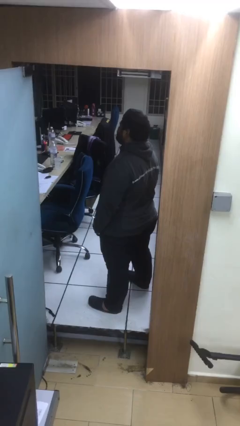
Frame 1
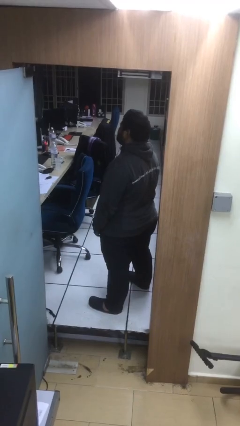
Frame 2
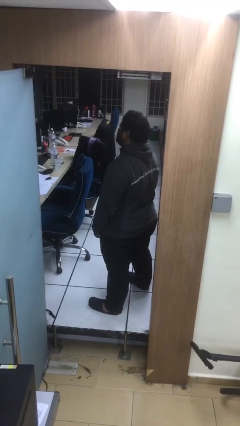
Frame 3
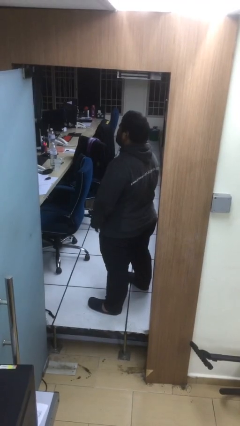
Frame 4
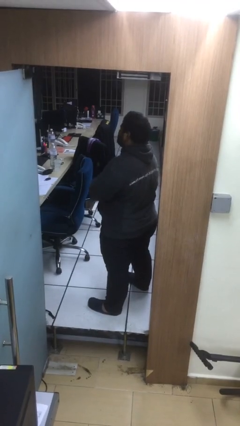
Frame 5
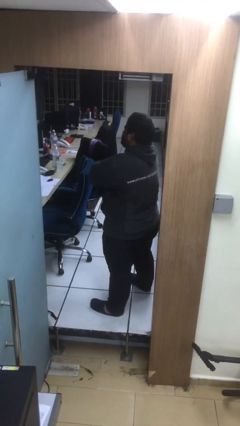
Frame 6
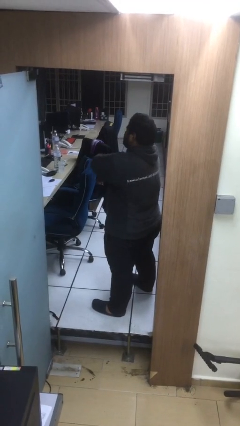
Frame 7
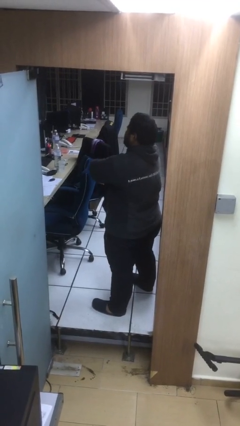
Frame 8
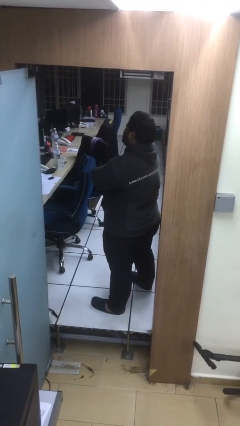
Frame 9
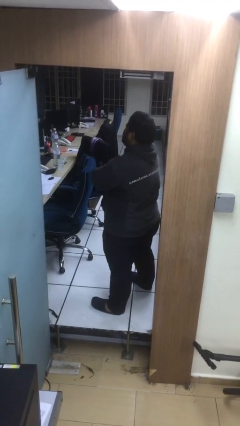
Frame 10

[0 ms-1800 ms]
person crosses arms

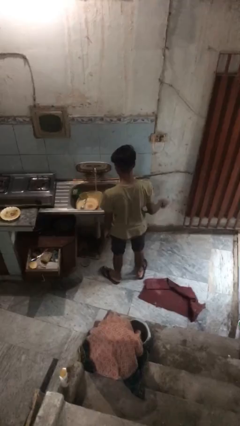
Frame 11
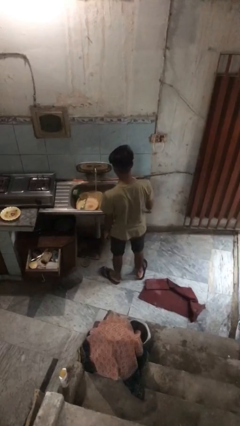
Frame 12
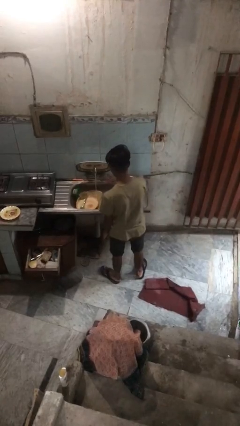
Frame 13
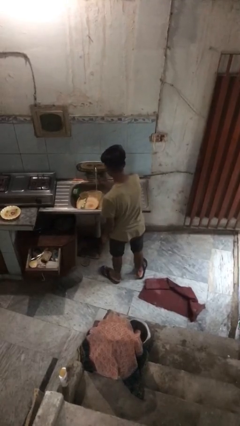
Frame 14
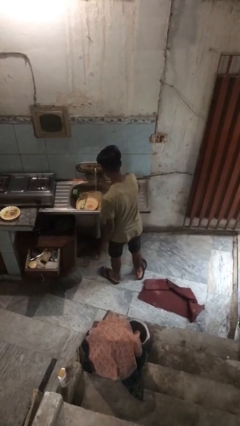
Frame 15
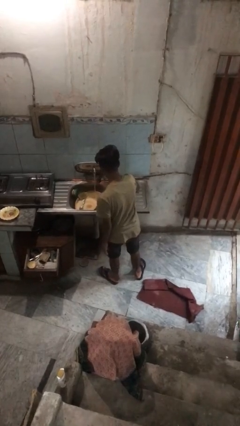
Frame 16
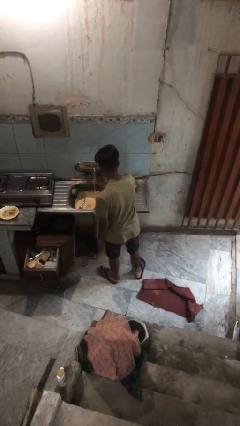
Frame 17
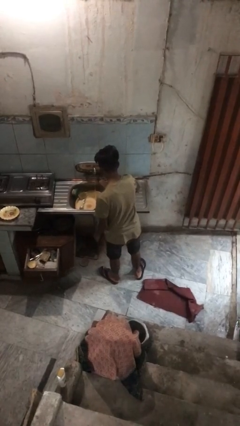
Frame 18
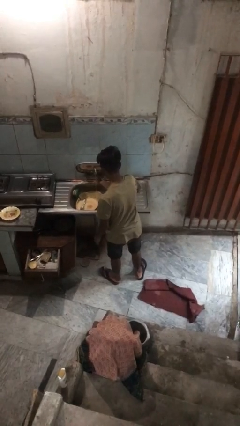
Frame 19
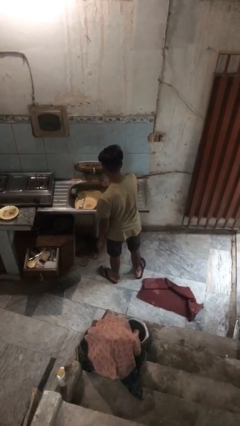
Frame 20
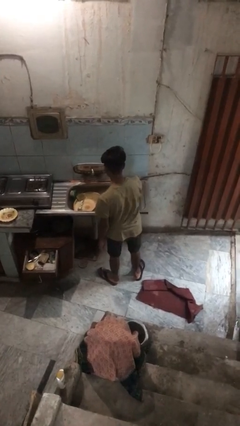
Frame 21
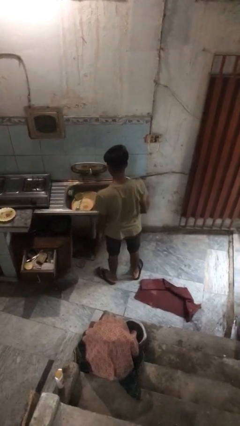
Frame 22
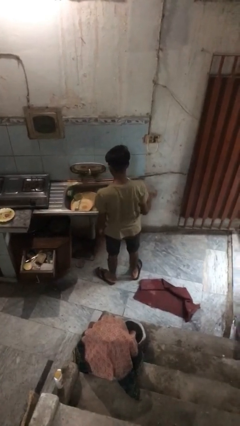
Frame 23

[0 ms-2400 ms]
person turns off faucet

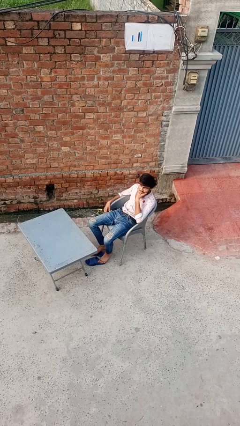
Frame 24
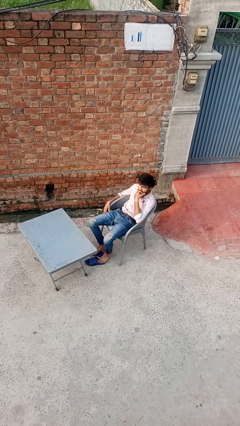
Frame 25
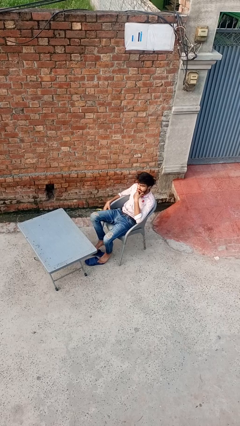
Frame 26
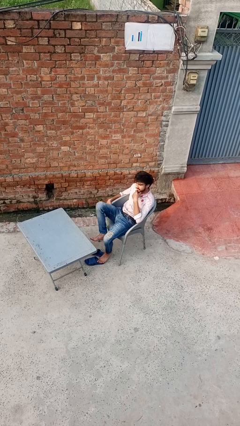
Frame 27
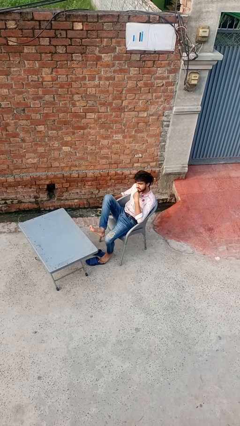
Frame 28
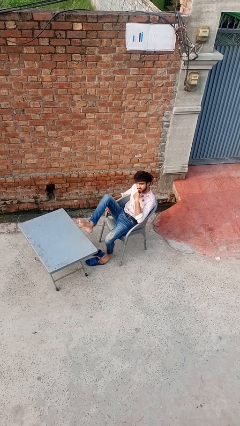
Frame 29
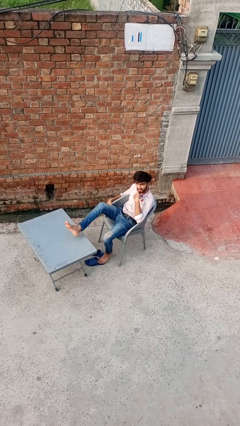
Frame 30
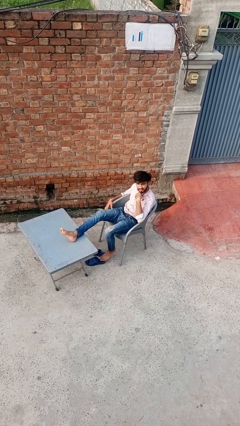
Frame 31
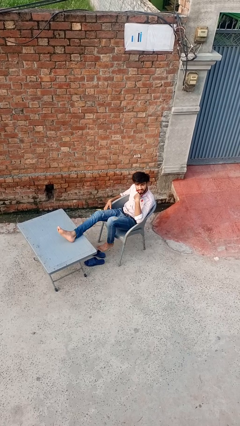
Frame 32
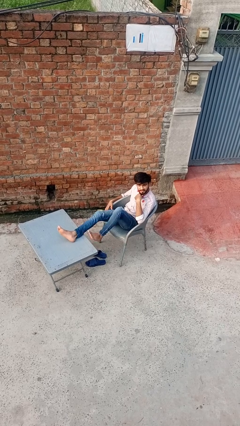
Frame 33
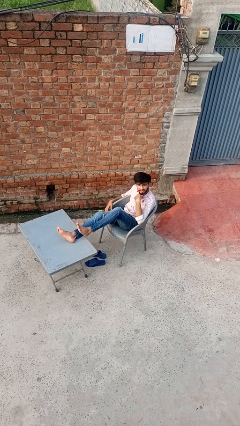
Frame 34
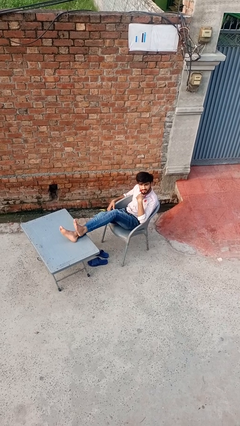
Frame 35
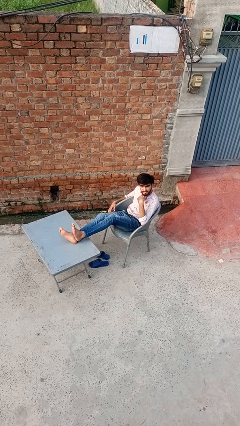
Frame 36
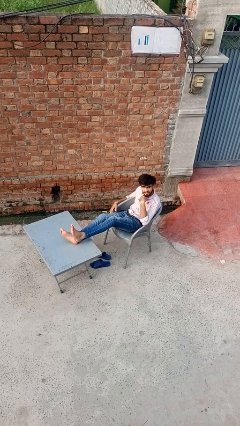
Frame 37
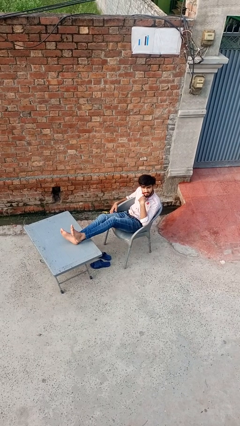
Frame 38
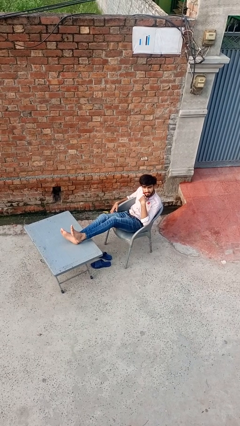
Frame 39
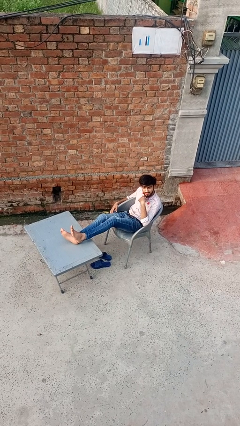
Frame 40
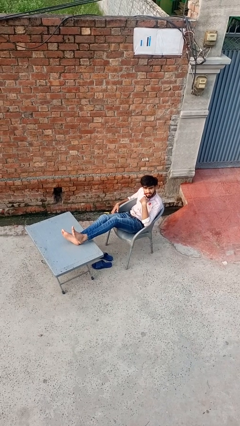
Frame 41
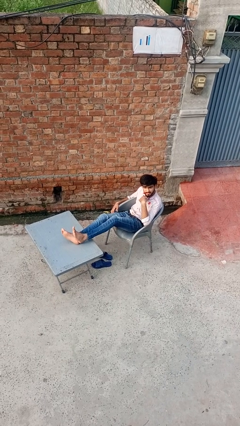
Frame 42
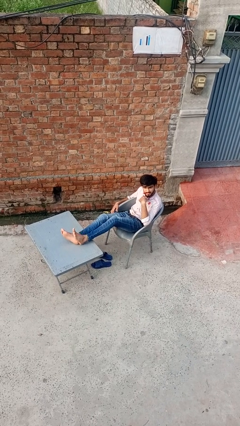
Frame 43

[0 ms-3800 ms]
person puts feet up

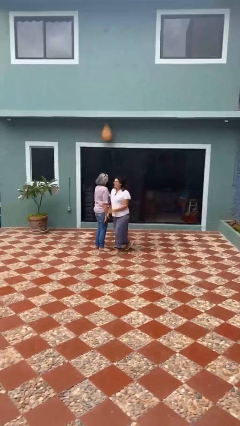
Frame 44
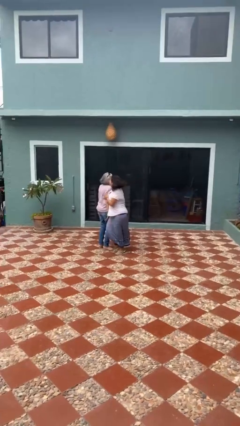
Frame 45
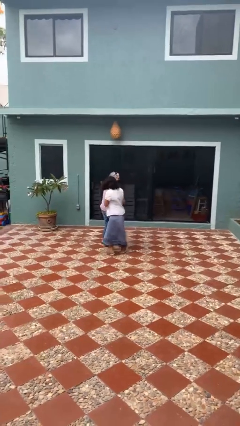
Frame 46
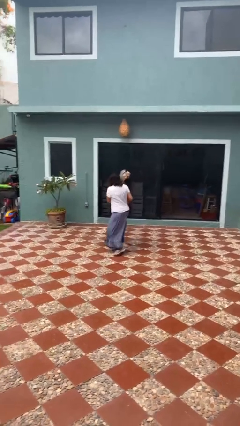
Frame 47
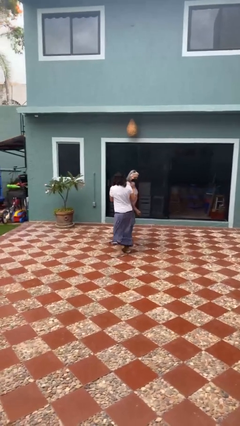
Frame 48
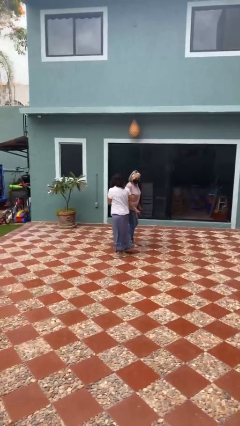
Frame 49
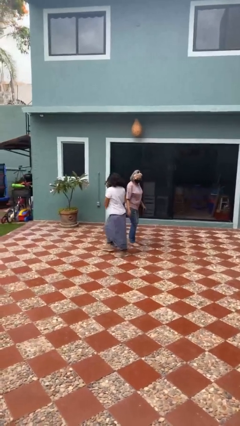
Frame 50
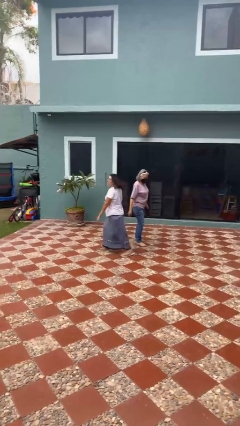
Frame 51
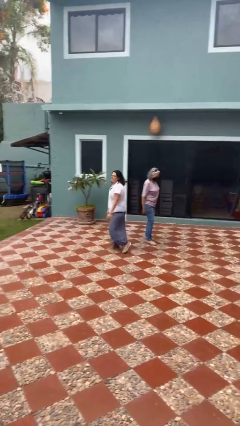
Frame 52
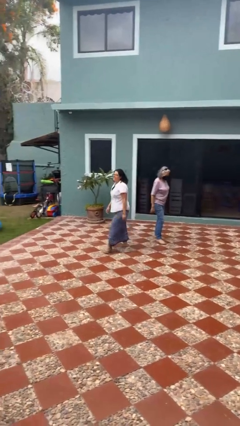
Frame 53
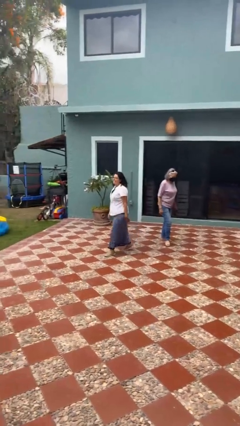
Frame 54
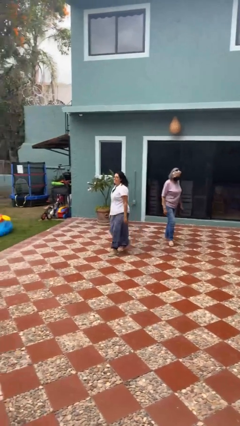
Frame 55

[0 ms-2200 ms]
person bumps into person

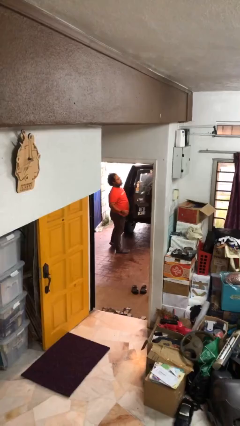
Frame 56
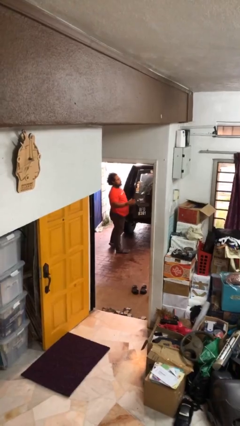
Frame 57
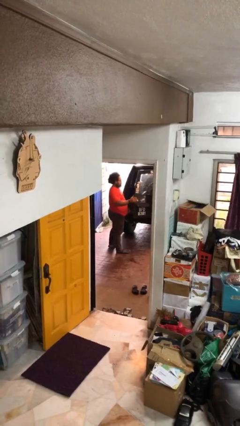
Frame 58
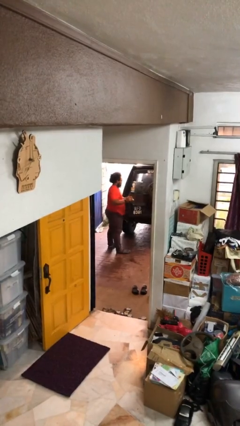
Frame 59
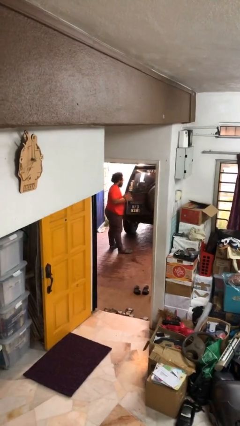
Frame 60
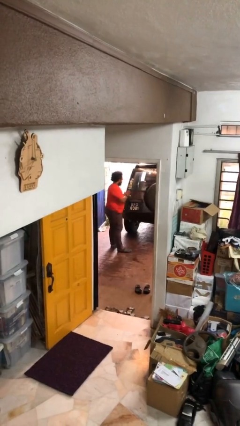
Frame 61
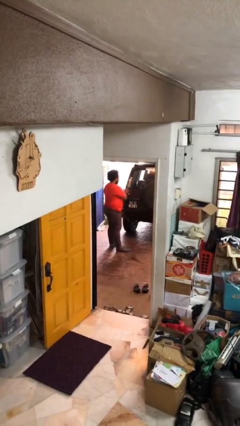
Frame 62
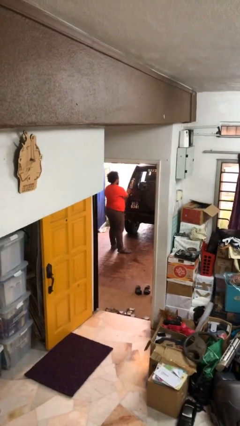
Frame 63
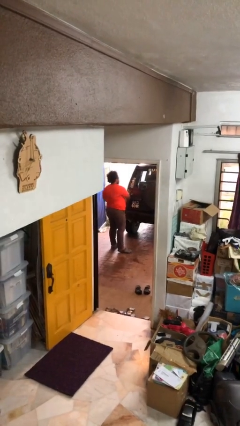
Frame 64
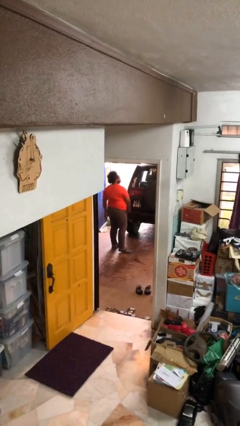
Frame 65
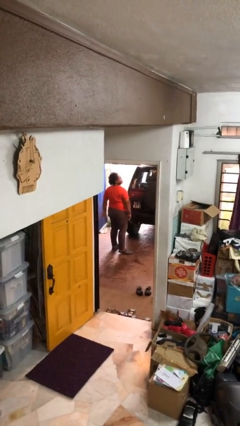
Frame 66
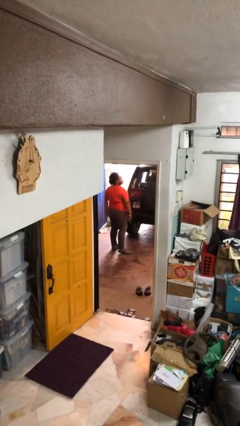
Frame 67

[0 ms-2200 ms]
person closes car trunk

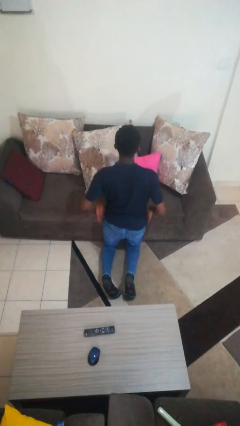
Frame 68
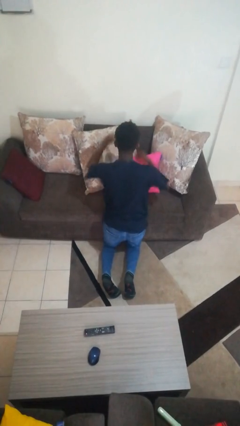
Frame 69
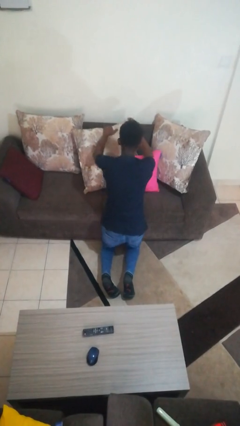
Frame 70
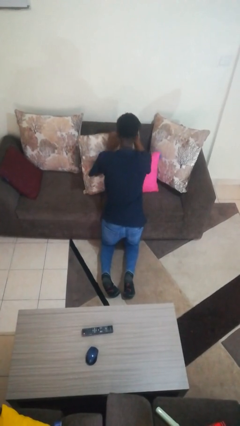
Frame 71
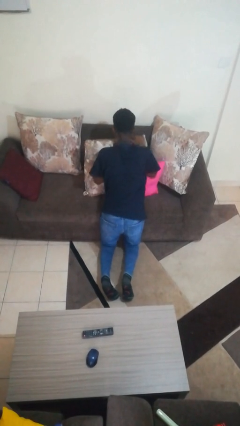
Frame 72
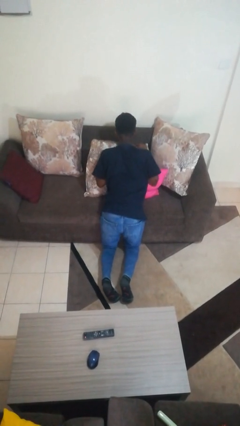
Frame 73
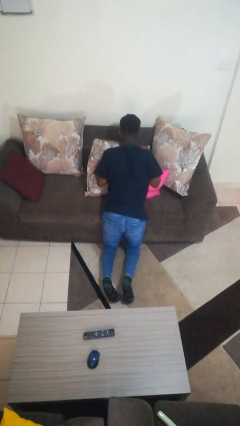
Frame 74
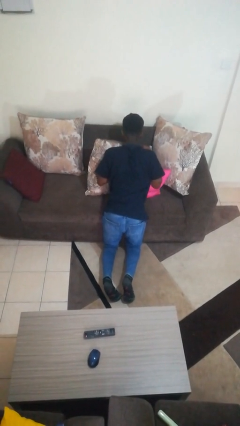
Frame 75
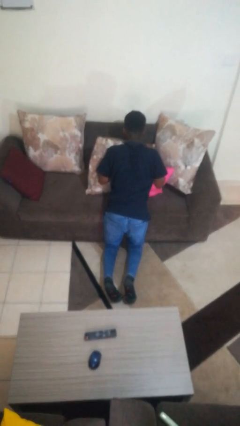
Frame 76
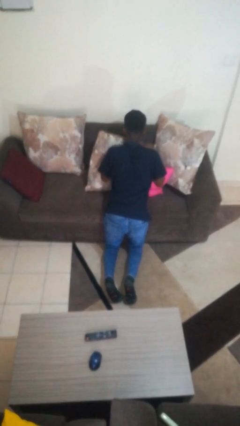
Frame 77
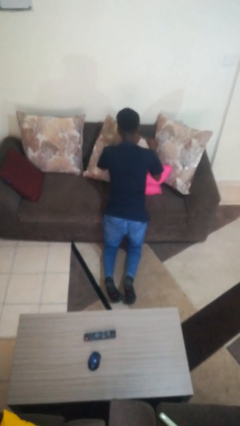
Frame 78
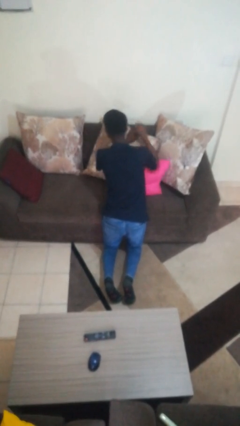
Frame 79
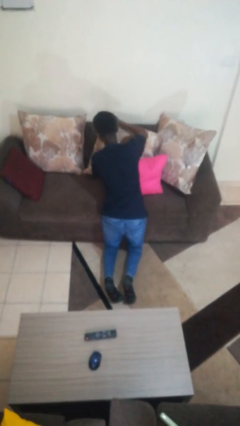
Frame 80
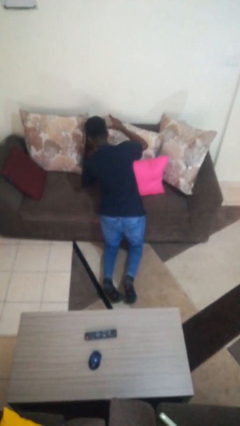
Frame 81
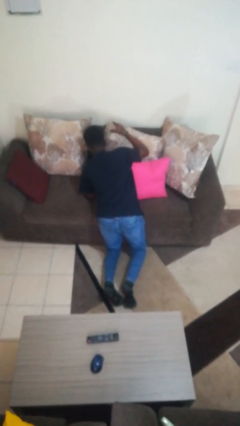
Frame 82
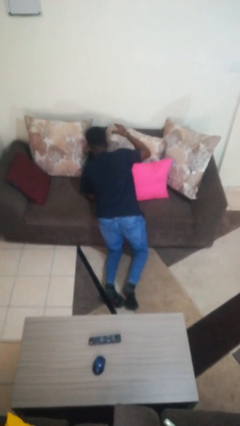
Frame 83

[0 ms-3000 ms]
person searches in couch

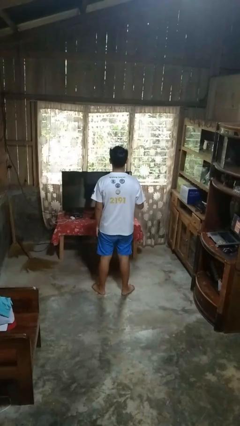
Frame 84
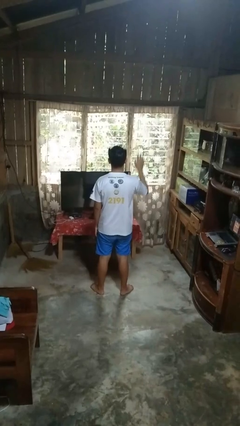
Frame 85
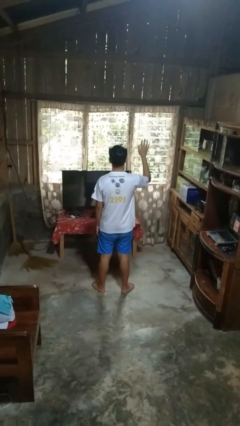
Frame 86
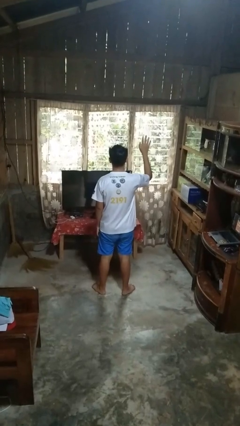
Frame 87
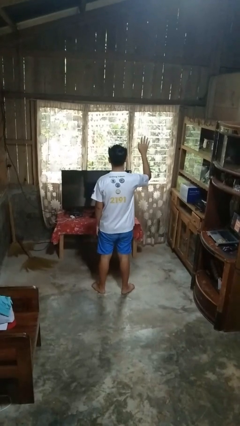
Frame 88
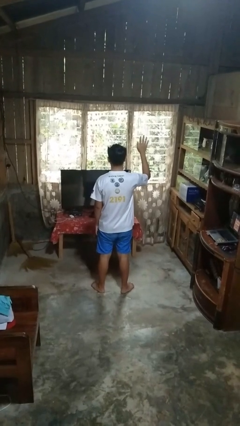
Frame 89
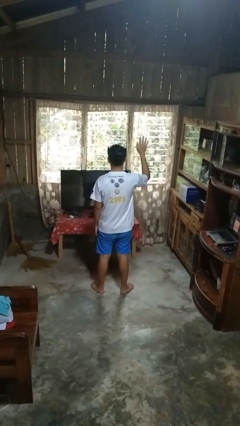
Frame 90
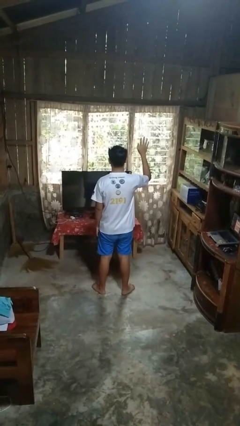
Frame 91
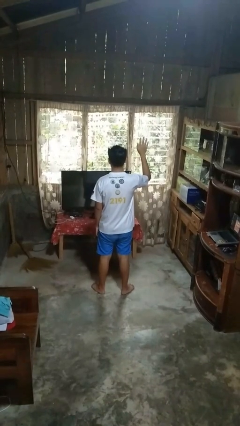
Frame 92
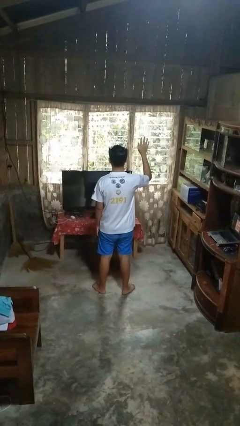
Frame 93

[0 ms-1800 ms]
person gestures raise hand
